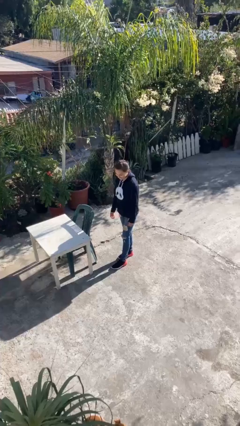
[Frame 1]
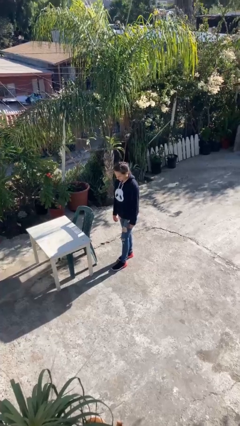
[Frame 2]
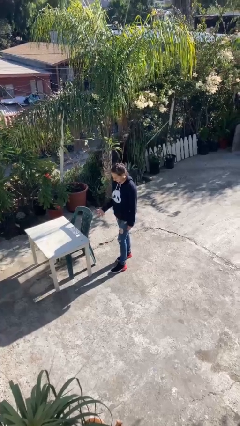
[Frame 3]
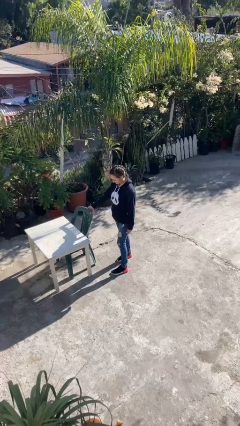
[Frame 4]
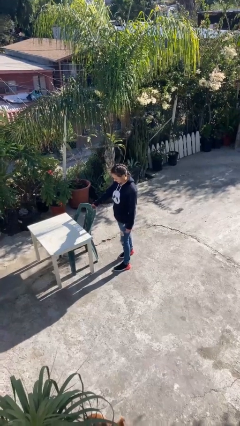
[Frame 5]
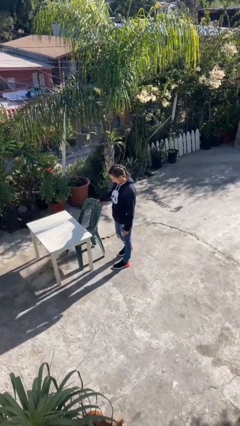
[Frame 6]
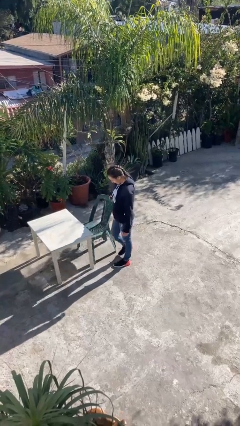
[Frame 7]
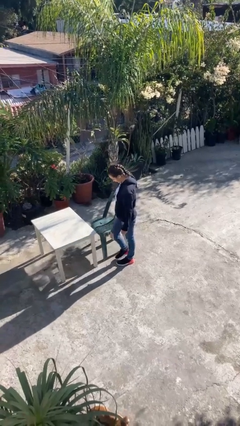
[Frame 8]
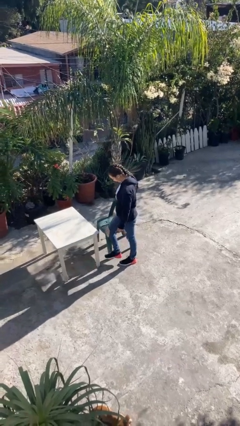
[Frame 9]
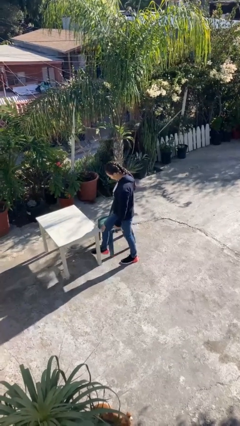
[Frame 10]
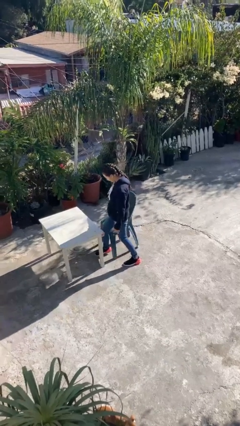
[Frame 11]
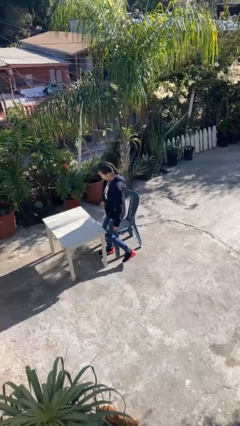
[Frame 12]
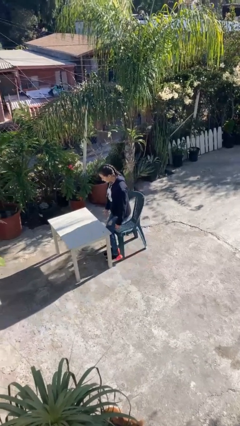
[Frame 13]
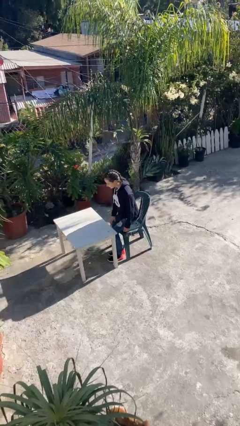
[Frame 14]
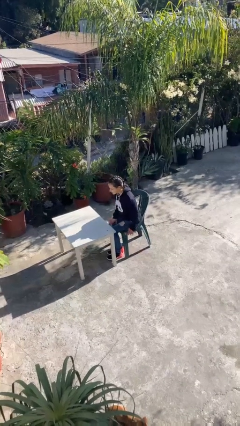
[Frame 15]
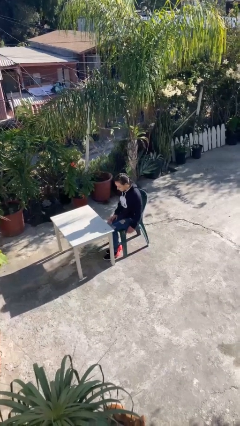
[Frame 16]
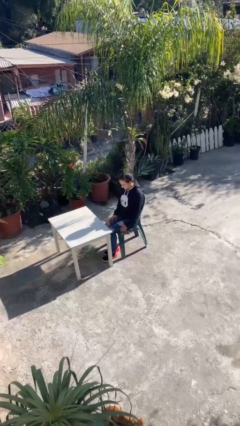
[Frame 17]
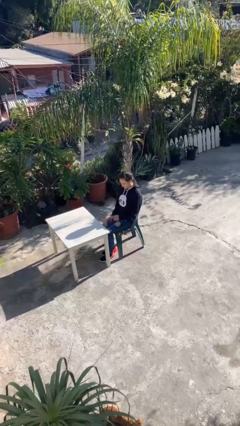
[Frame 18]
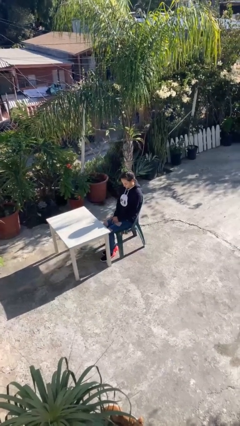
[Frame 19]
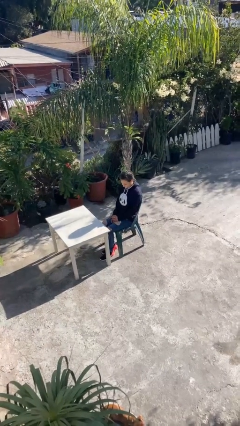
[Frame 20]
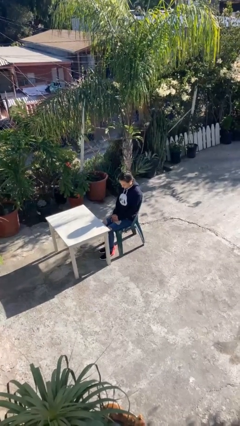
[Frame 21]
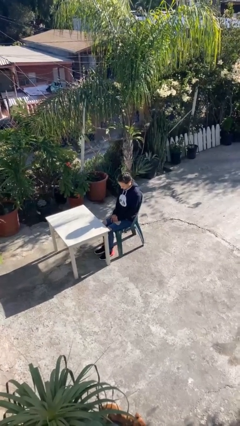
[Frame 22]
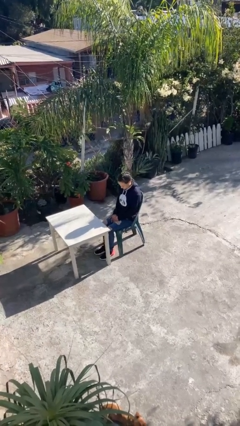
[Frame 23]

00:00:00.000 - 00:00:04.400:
person sits down

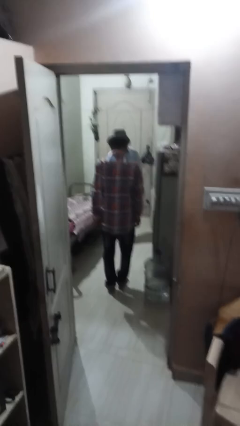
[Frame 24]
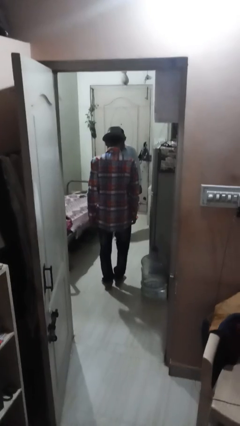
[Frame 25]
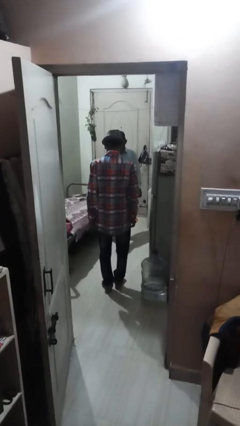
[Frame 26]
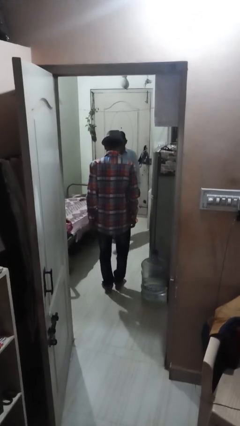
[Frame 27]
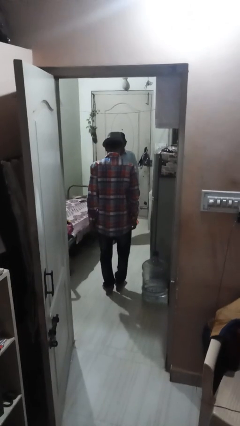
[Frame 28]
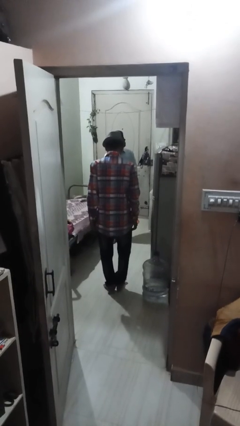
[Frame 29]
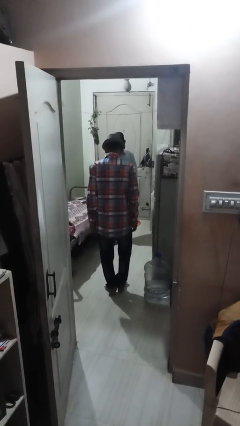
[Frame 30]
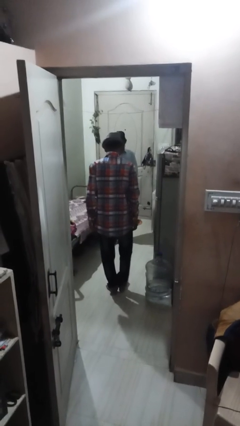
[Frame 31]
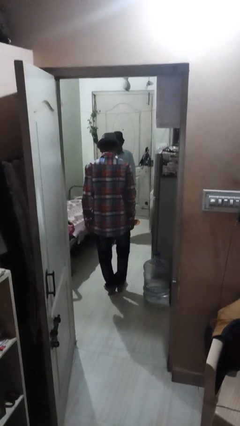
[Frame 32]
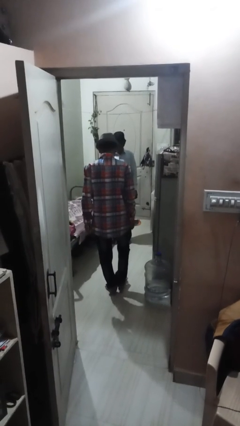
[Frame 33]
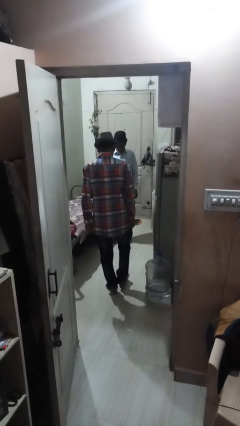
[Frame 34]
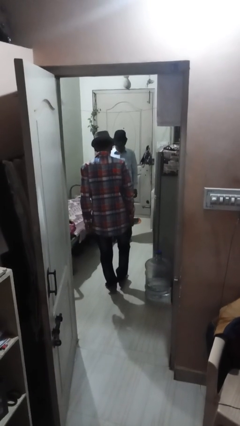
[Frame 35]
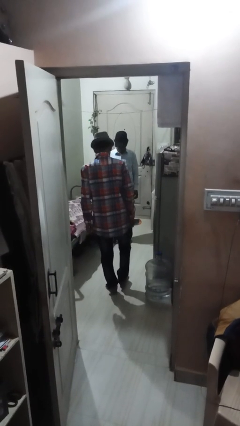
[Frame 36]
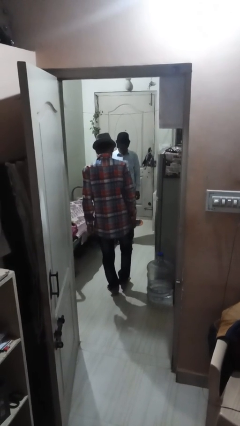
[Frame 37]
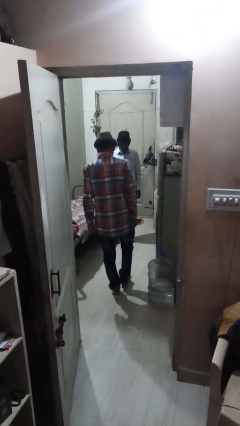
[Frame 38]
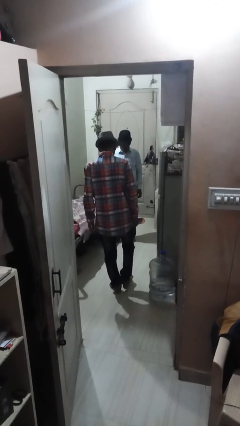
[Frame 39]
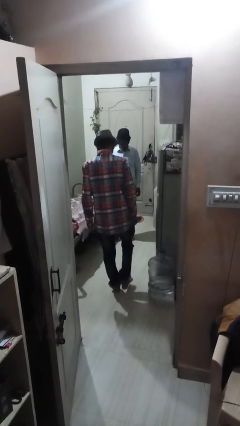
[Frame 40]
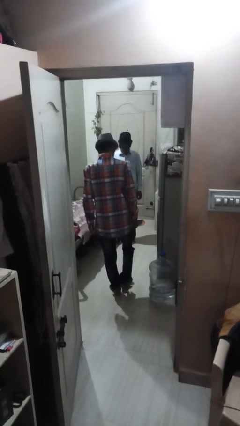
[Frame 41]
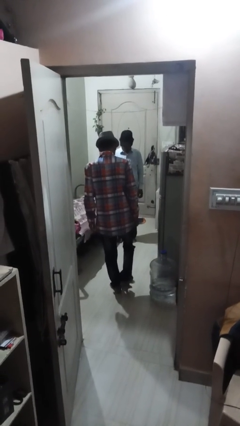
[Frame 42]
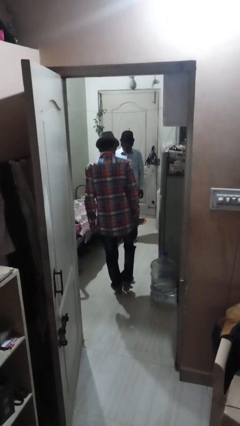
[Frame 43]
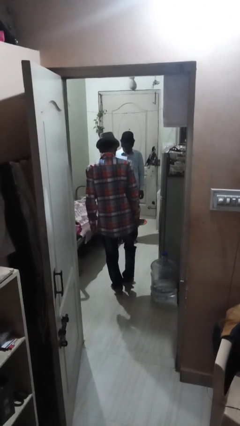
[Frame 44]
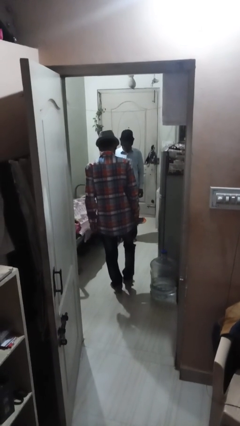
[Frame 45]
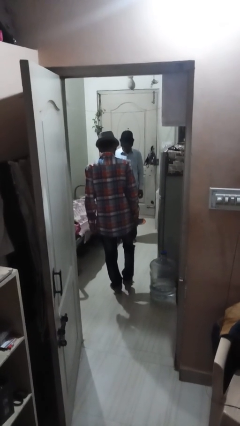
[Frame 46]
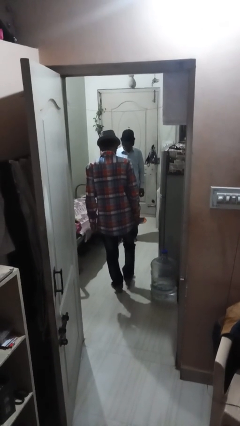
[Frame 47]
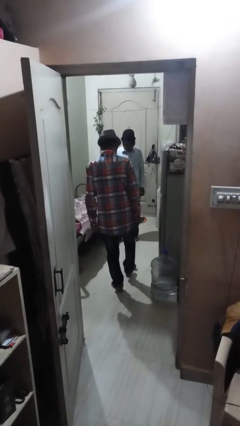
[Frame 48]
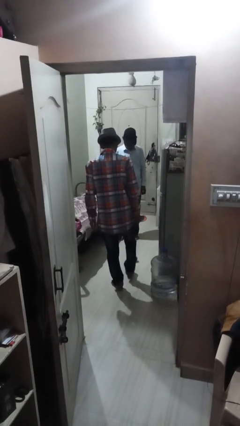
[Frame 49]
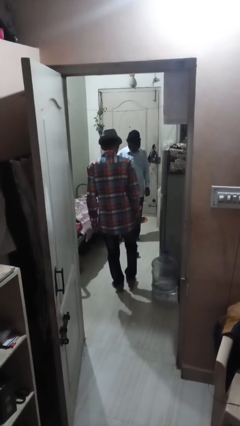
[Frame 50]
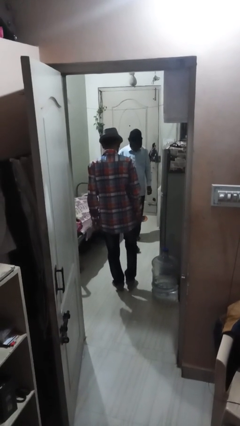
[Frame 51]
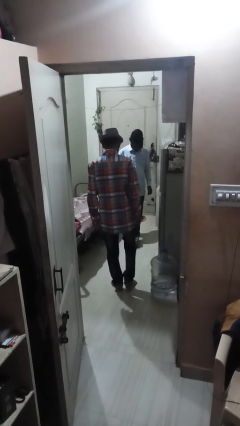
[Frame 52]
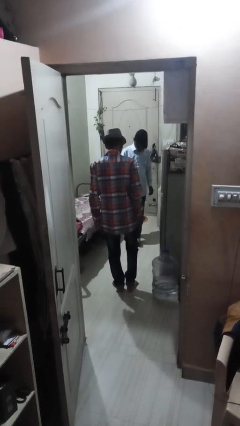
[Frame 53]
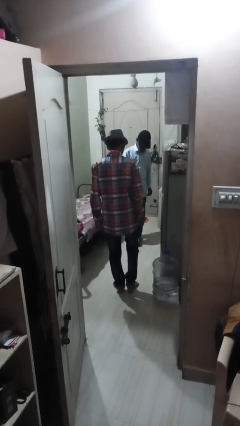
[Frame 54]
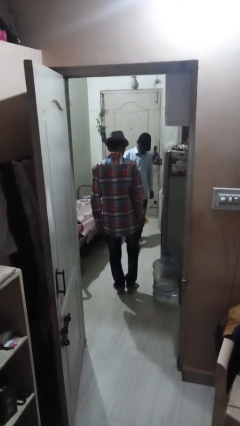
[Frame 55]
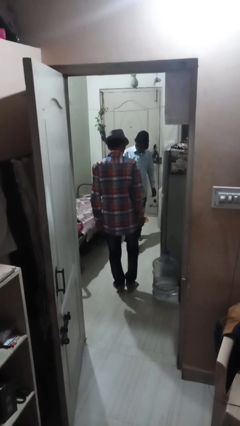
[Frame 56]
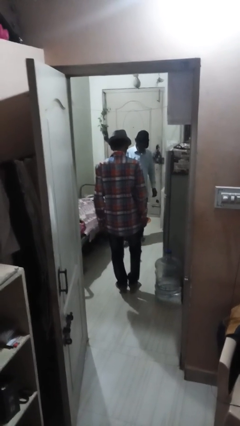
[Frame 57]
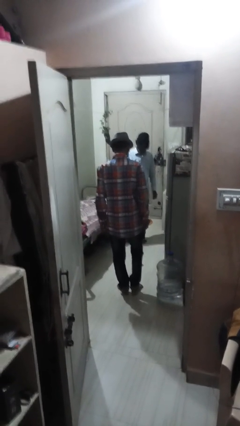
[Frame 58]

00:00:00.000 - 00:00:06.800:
person kicks object to person

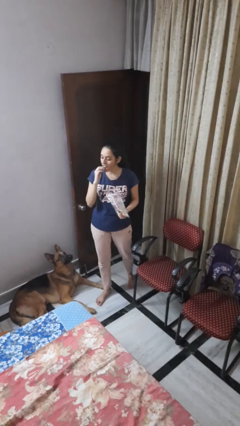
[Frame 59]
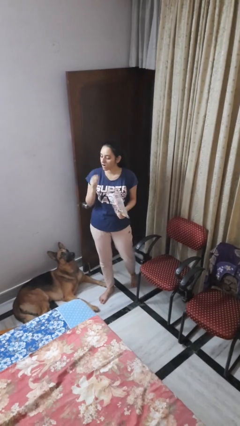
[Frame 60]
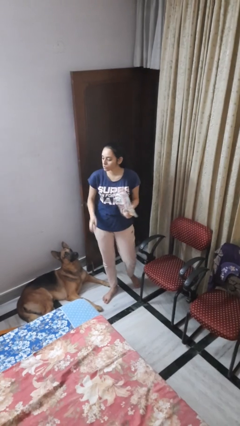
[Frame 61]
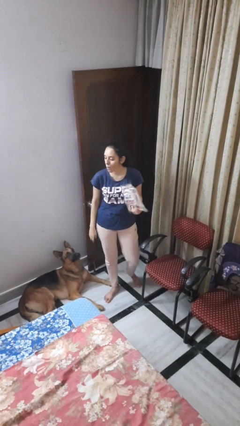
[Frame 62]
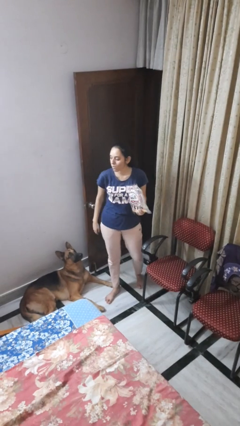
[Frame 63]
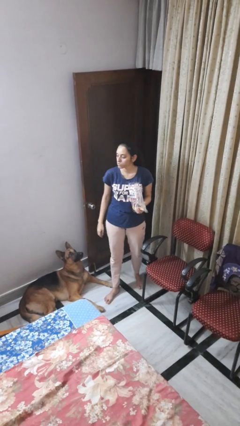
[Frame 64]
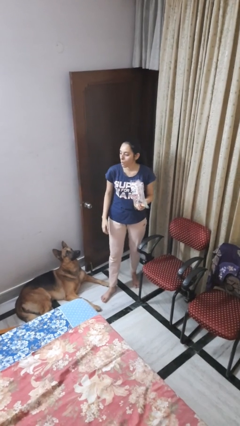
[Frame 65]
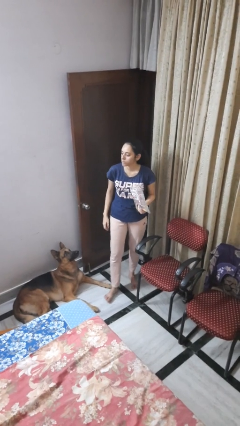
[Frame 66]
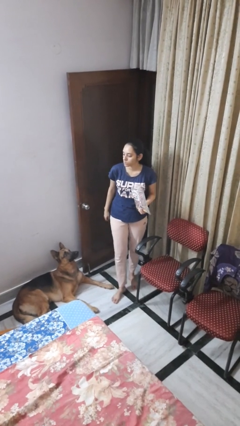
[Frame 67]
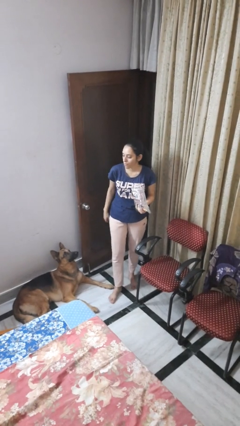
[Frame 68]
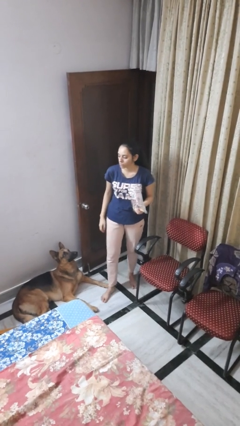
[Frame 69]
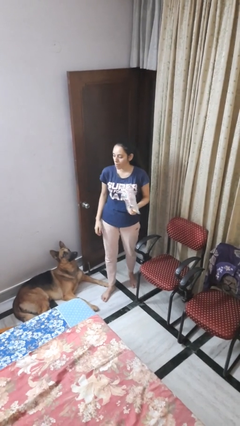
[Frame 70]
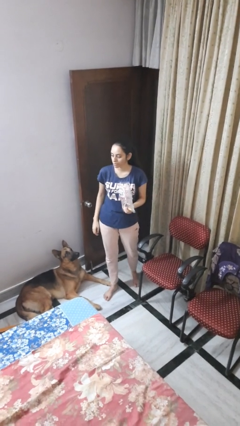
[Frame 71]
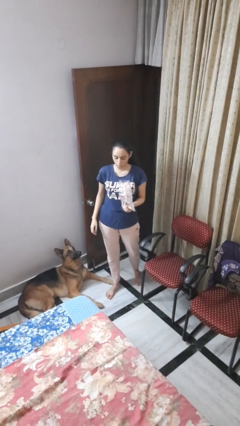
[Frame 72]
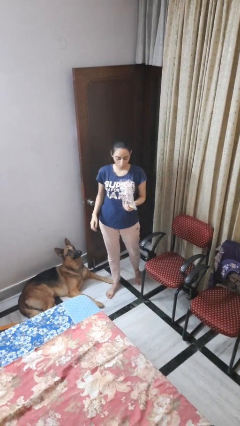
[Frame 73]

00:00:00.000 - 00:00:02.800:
person eats snack from bag

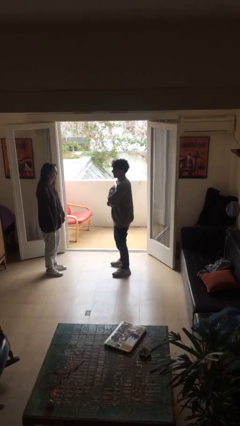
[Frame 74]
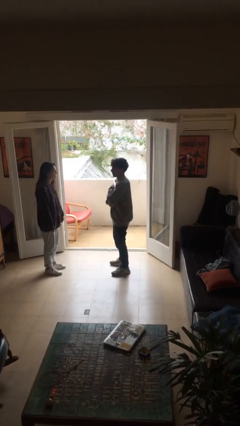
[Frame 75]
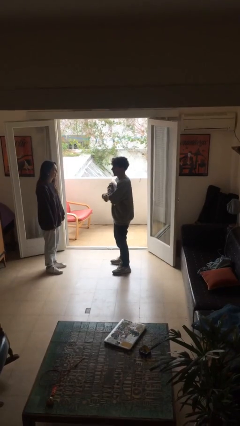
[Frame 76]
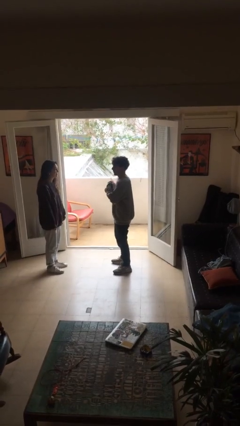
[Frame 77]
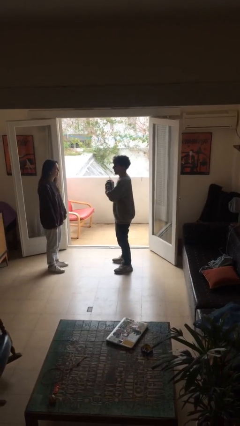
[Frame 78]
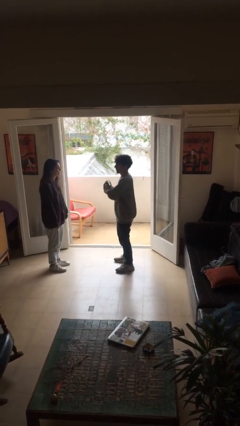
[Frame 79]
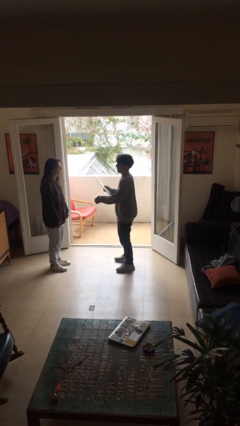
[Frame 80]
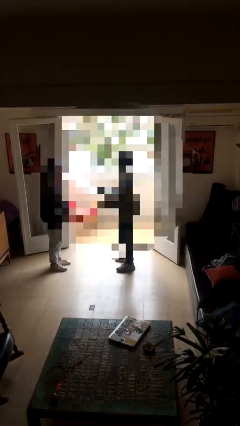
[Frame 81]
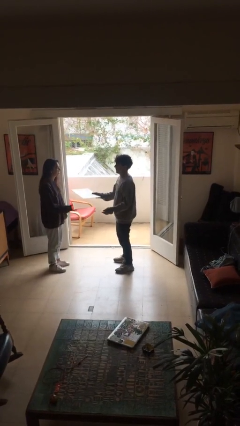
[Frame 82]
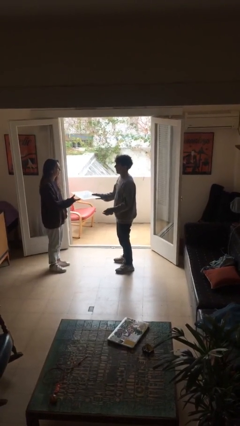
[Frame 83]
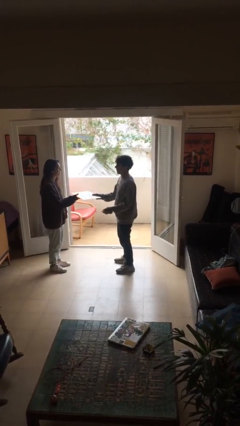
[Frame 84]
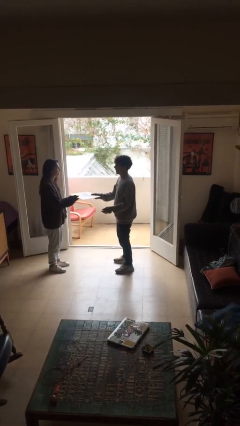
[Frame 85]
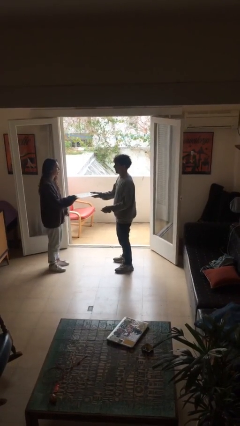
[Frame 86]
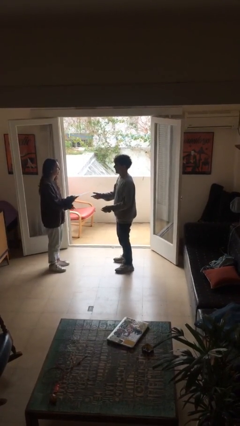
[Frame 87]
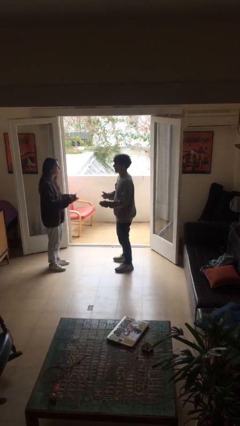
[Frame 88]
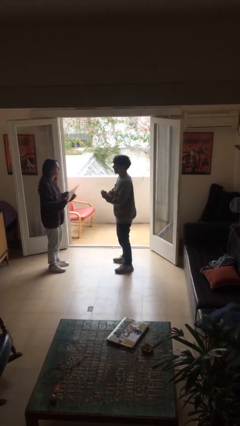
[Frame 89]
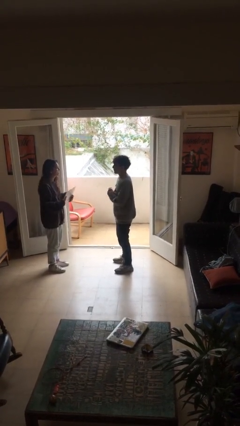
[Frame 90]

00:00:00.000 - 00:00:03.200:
person transfers object to person

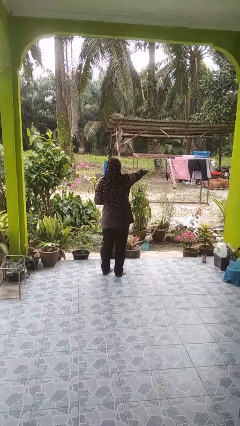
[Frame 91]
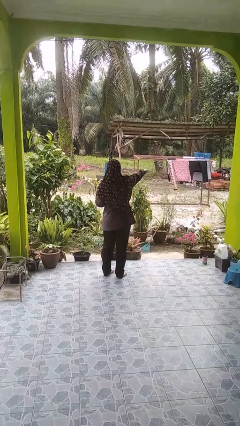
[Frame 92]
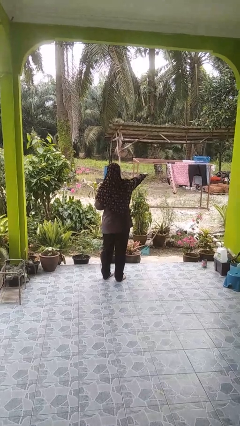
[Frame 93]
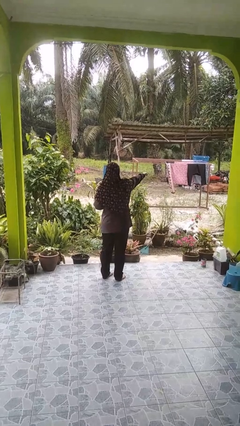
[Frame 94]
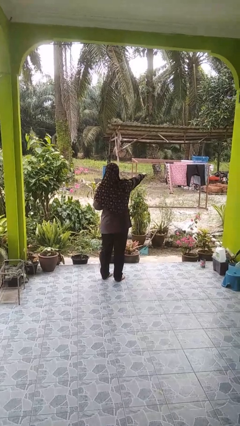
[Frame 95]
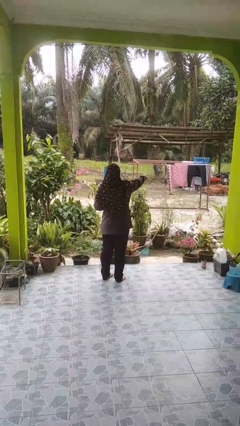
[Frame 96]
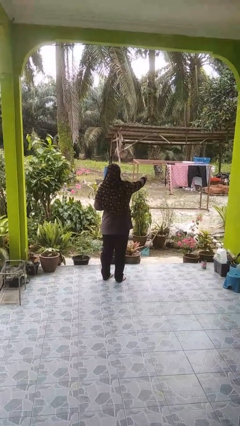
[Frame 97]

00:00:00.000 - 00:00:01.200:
person punches
